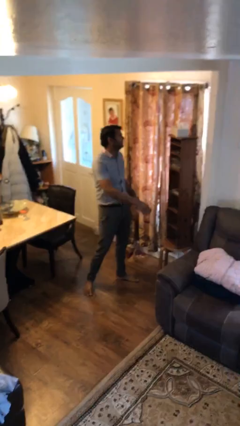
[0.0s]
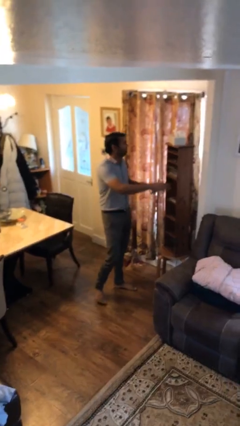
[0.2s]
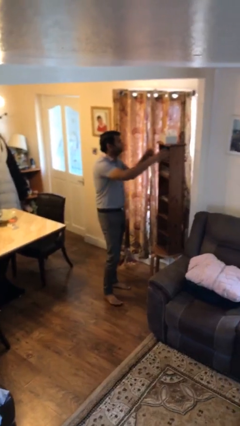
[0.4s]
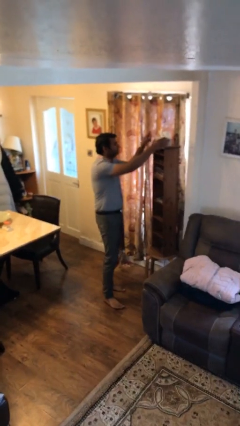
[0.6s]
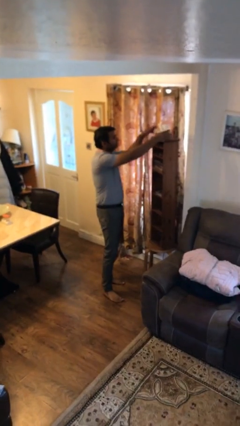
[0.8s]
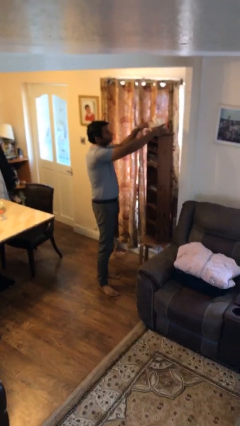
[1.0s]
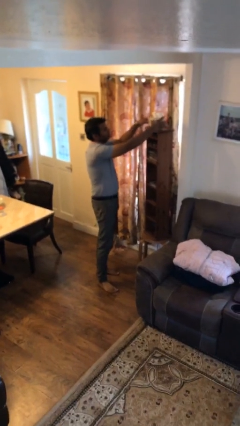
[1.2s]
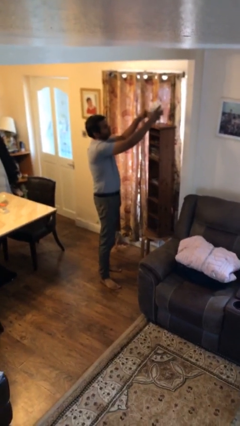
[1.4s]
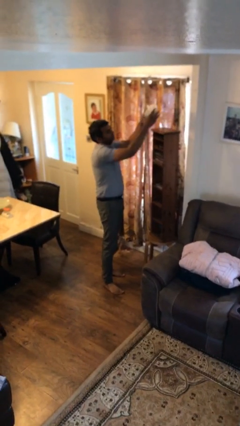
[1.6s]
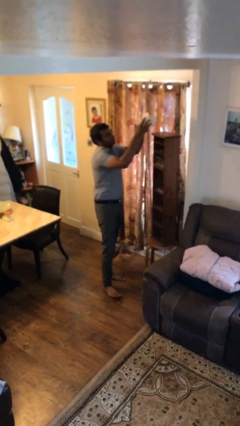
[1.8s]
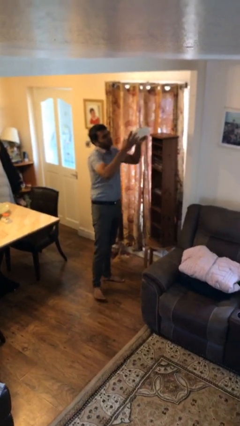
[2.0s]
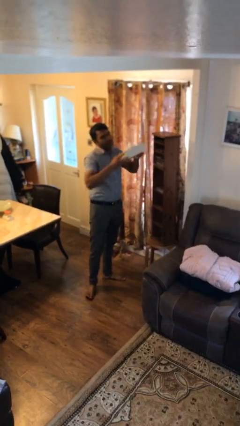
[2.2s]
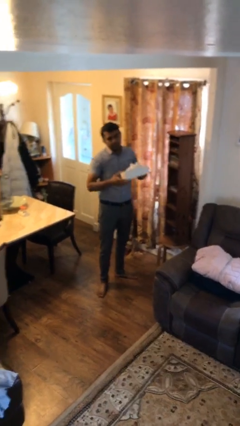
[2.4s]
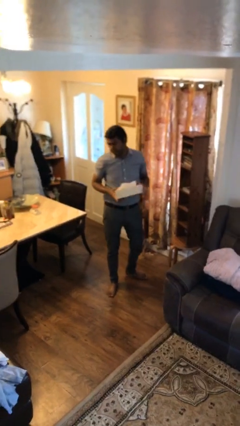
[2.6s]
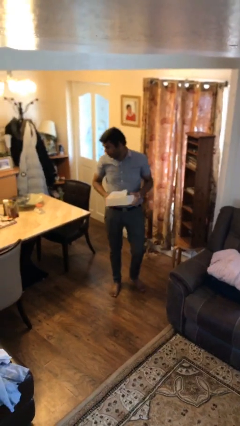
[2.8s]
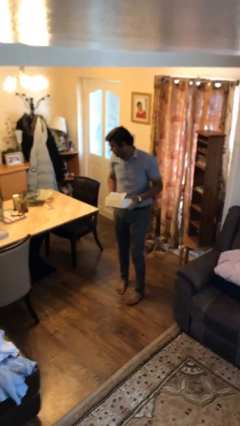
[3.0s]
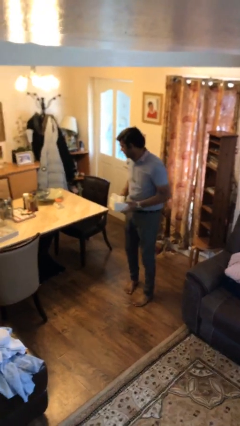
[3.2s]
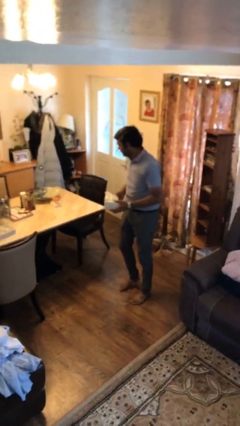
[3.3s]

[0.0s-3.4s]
person picks up object from shelf

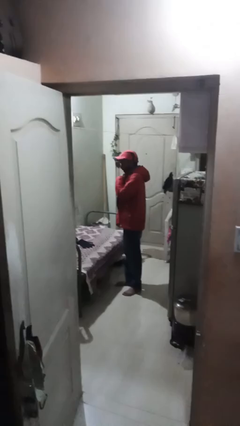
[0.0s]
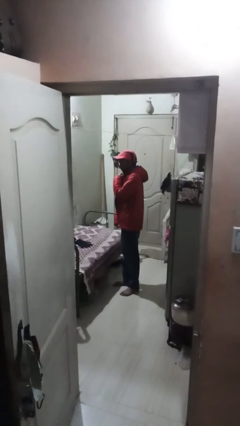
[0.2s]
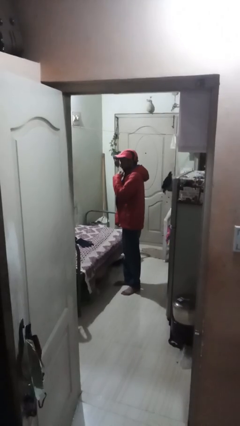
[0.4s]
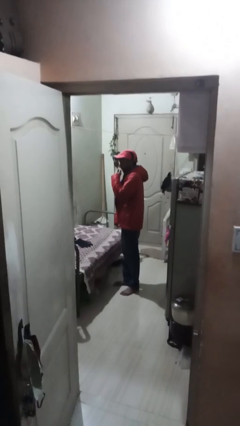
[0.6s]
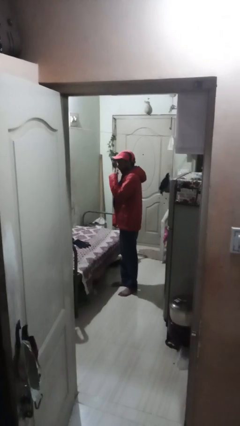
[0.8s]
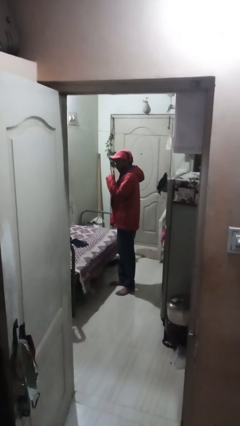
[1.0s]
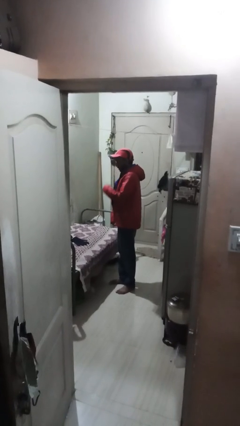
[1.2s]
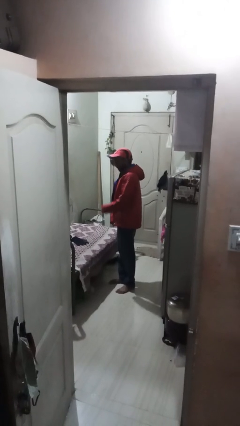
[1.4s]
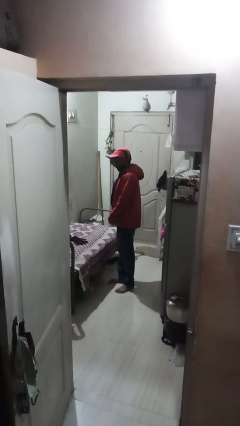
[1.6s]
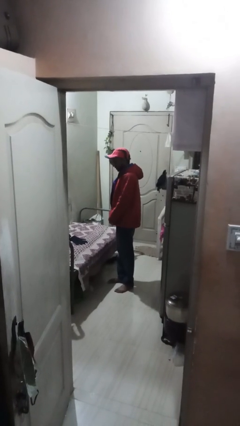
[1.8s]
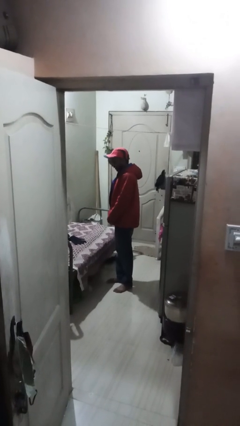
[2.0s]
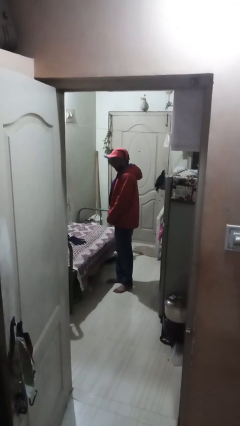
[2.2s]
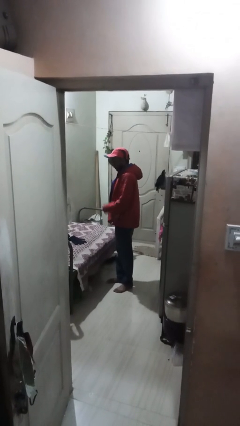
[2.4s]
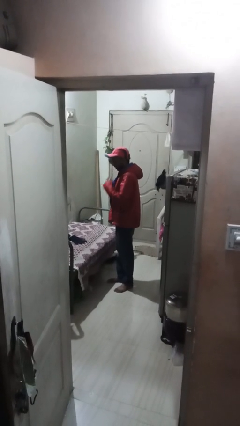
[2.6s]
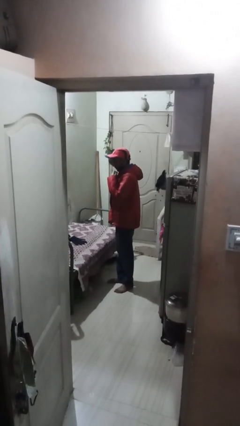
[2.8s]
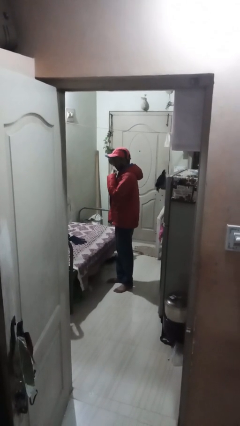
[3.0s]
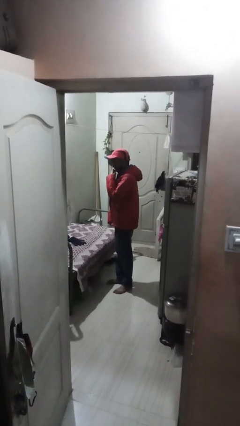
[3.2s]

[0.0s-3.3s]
person zips up jacket

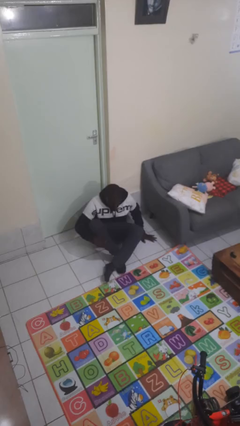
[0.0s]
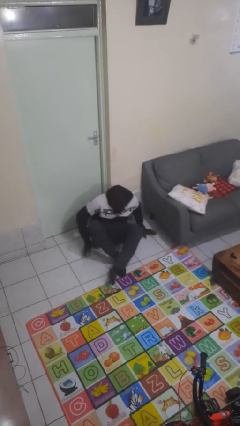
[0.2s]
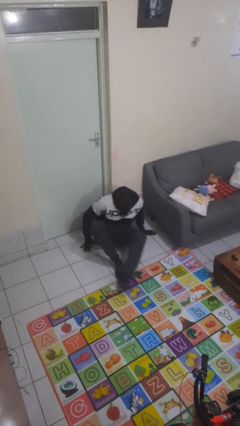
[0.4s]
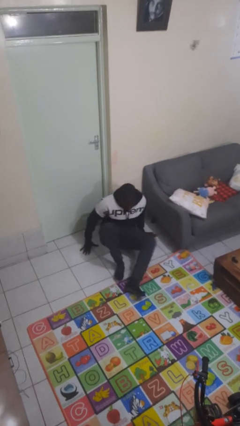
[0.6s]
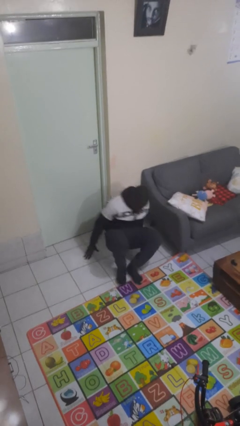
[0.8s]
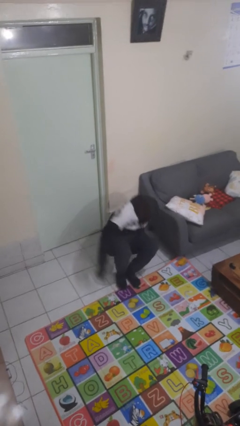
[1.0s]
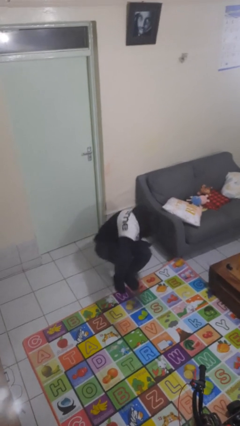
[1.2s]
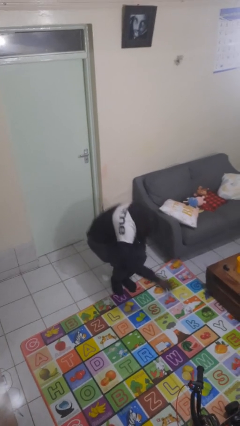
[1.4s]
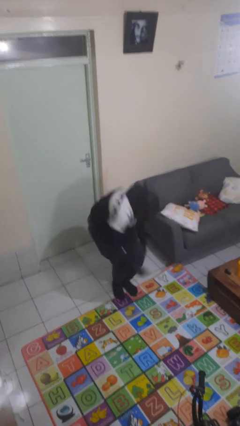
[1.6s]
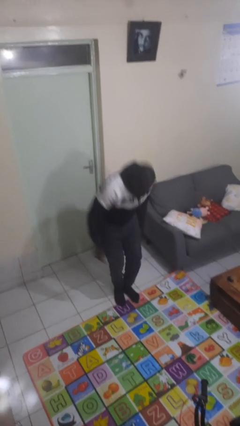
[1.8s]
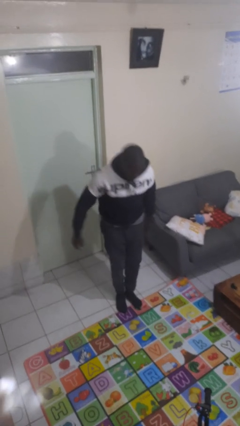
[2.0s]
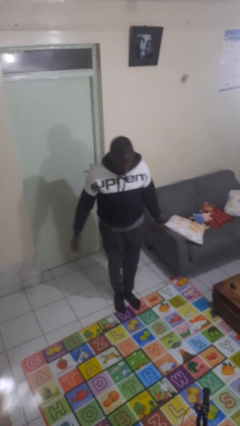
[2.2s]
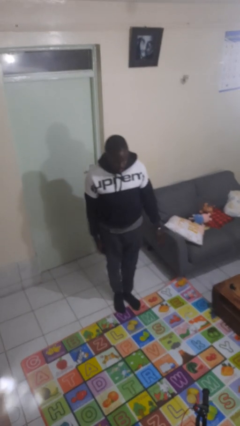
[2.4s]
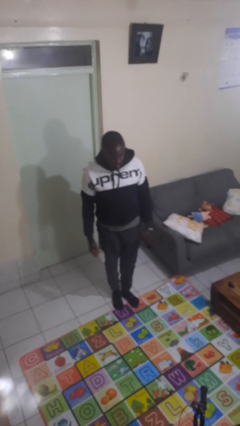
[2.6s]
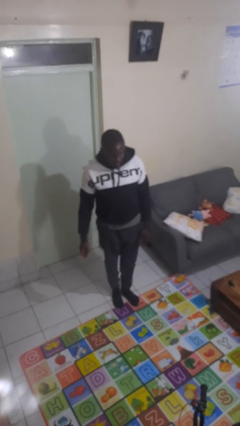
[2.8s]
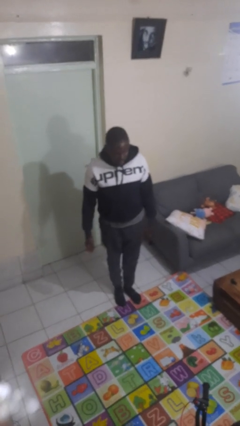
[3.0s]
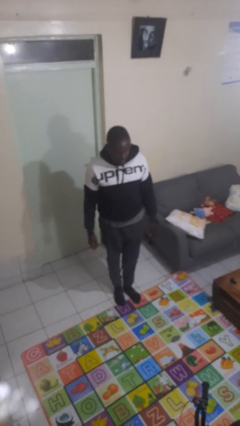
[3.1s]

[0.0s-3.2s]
person stands up from floor

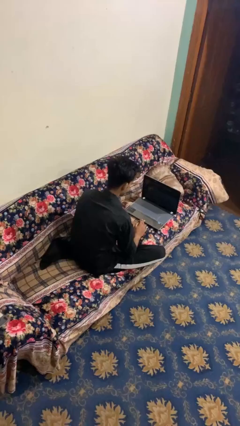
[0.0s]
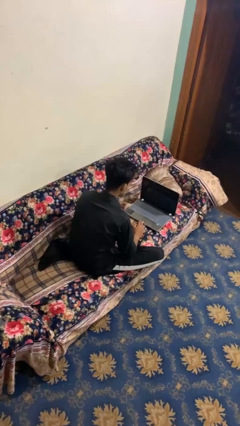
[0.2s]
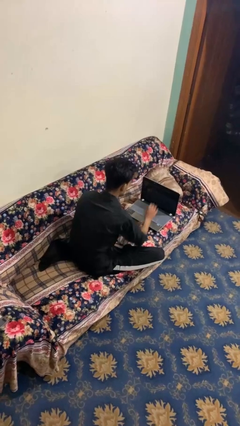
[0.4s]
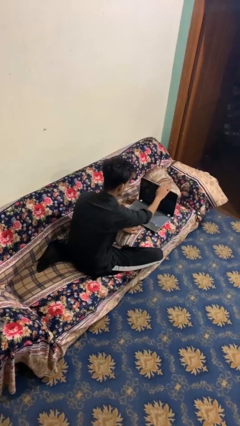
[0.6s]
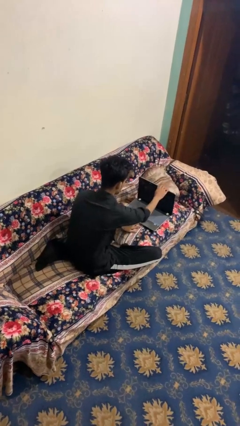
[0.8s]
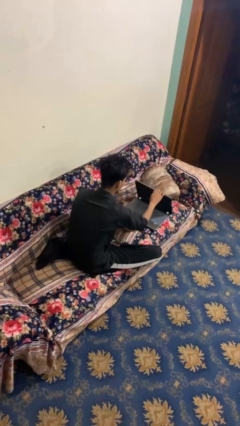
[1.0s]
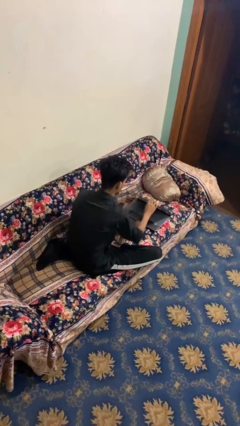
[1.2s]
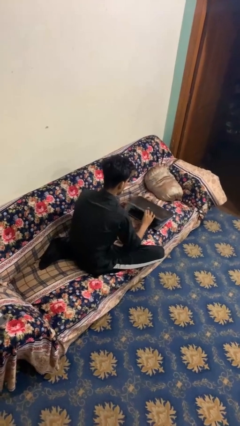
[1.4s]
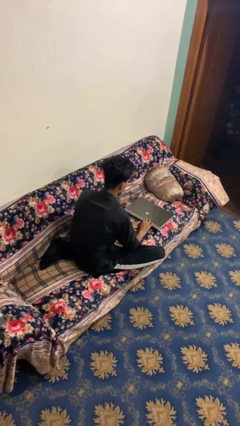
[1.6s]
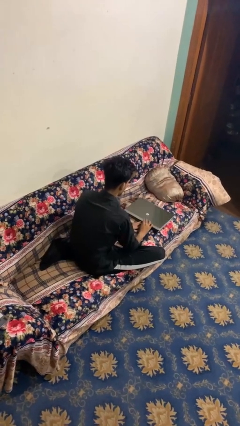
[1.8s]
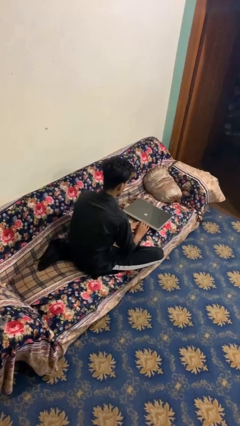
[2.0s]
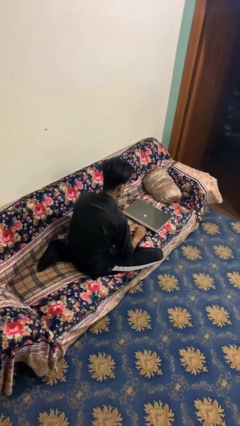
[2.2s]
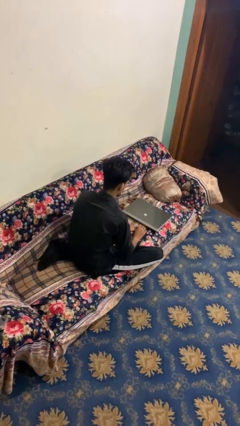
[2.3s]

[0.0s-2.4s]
person closes laptop

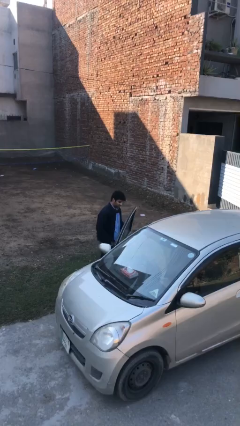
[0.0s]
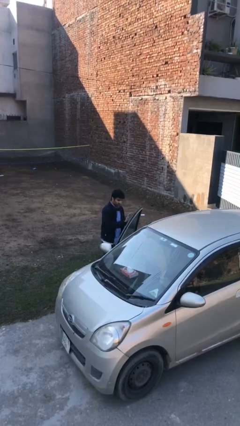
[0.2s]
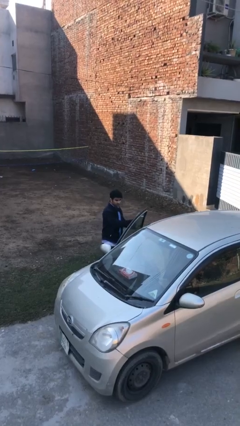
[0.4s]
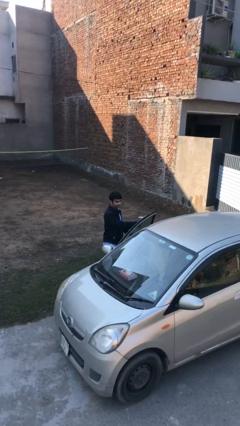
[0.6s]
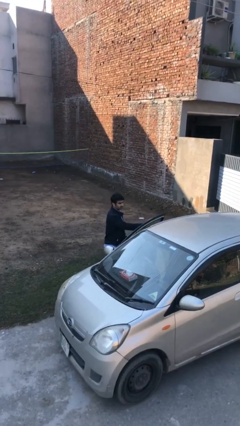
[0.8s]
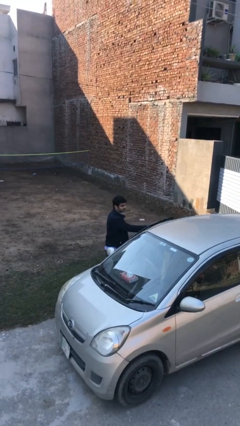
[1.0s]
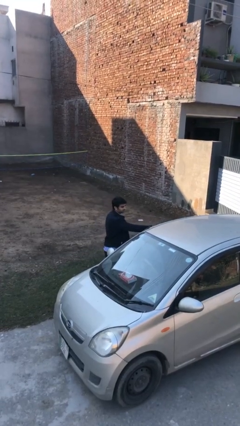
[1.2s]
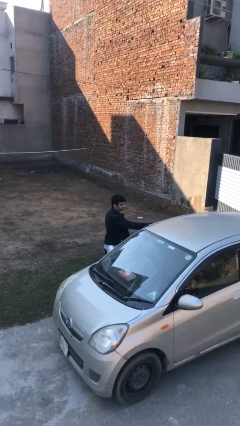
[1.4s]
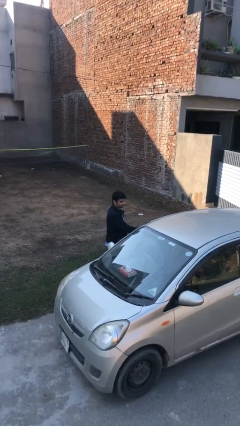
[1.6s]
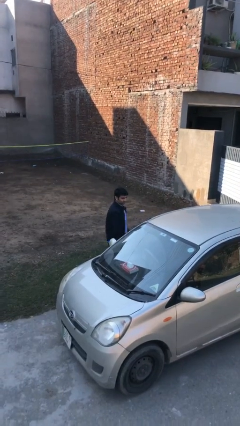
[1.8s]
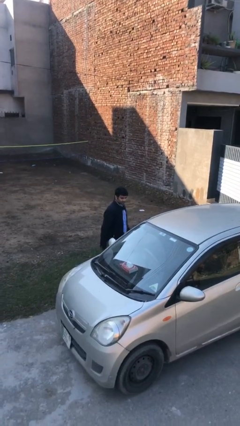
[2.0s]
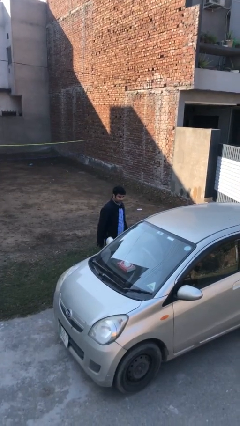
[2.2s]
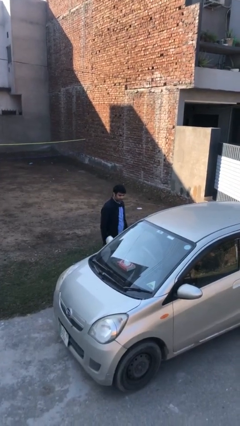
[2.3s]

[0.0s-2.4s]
person closes car door

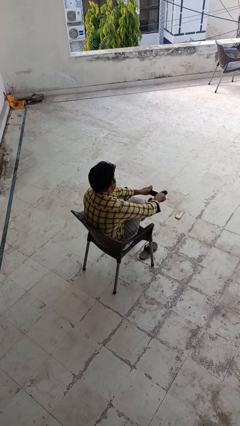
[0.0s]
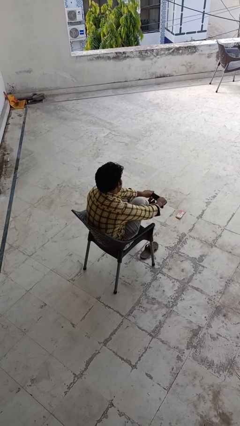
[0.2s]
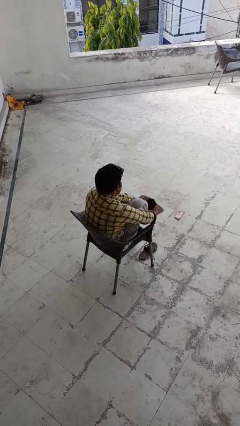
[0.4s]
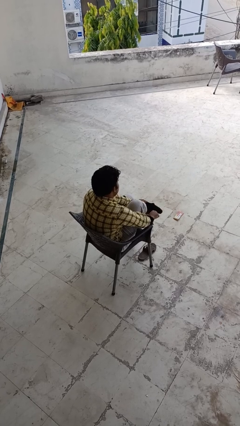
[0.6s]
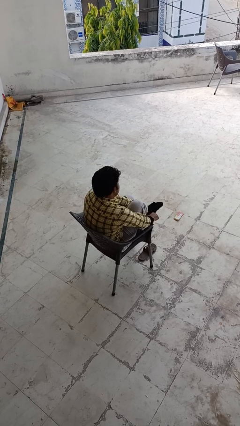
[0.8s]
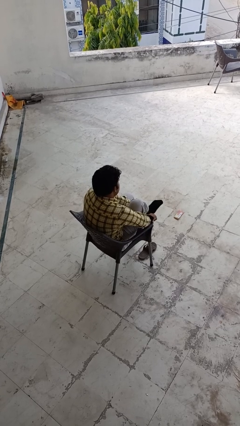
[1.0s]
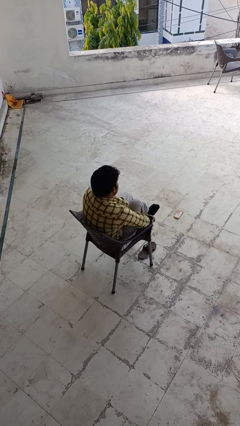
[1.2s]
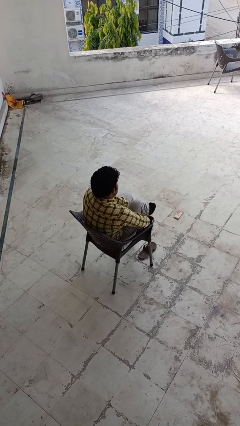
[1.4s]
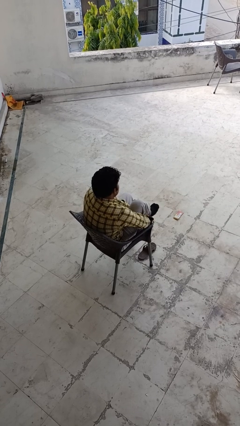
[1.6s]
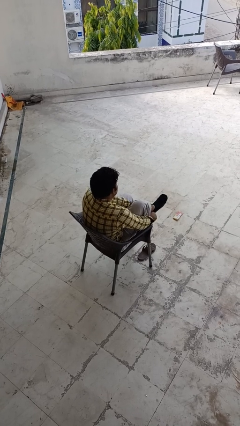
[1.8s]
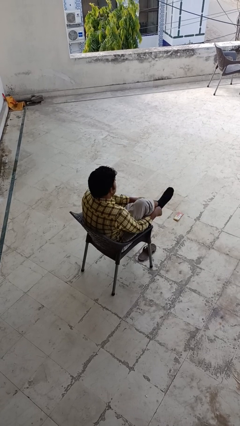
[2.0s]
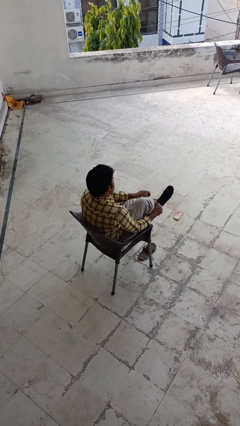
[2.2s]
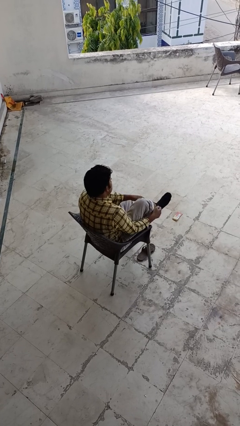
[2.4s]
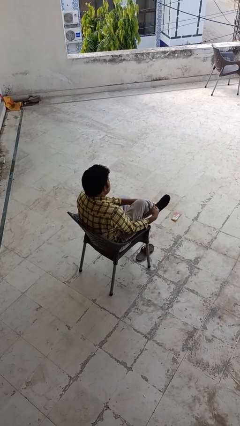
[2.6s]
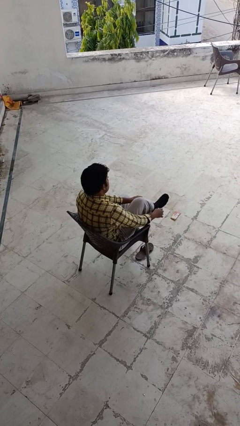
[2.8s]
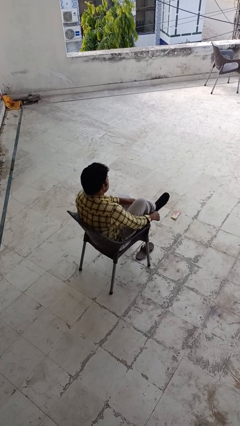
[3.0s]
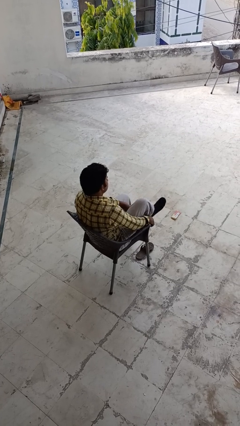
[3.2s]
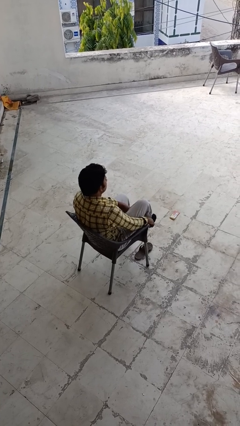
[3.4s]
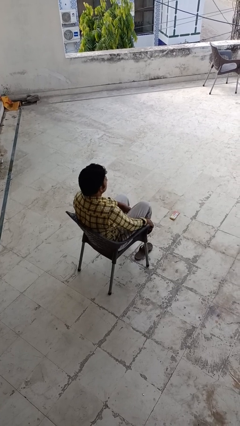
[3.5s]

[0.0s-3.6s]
person puts on socks
